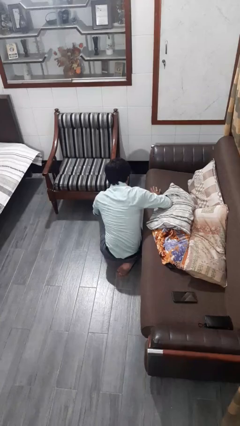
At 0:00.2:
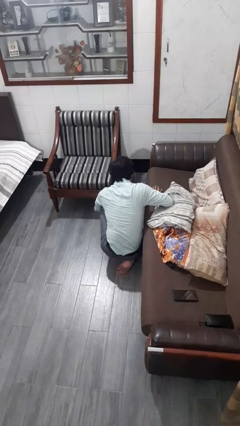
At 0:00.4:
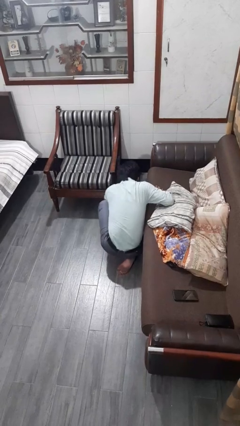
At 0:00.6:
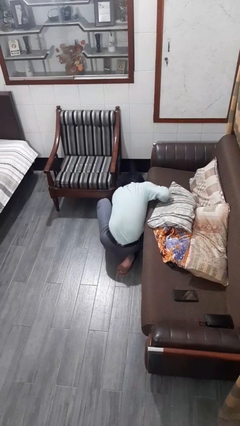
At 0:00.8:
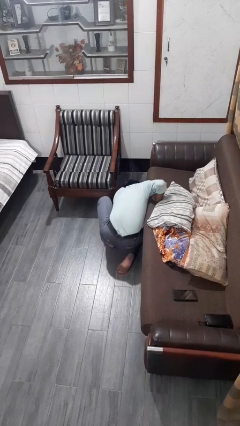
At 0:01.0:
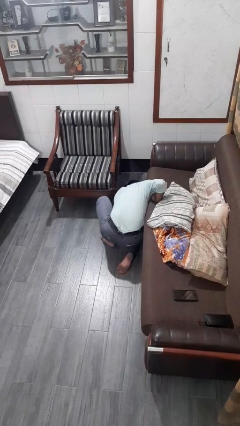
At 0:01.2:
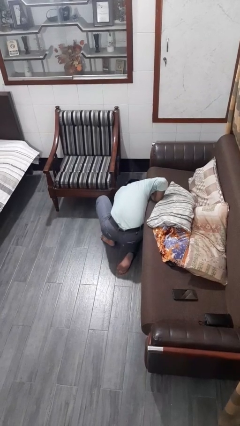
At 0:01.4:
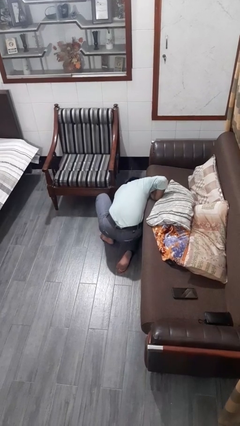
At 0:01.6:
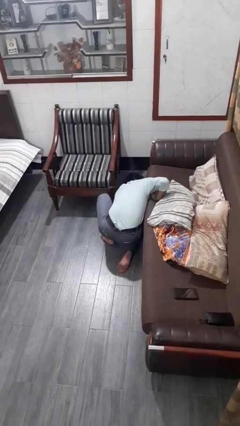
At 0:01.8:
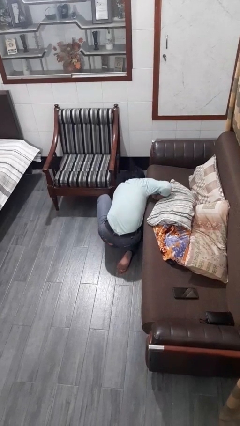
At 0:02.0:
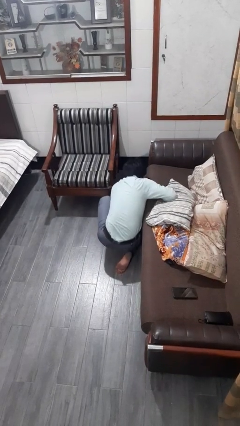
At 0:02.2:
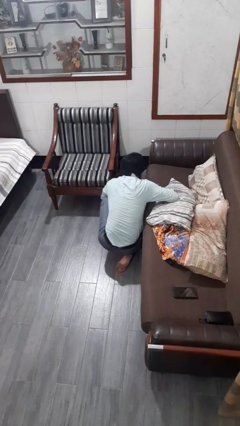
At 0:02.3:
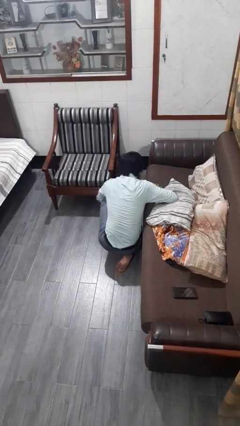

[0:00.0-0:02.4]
person searches under couch

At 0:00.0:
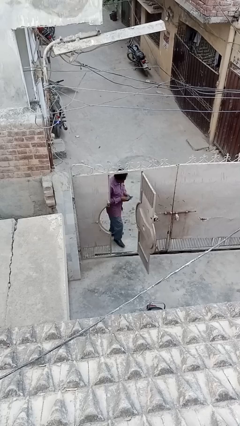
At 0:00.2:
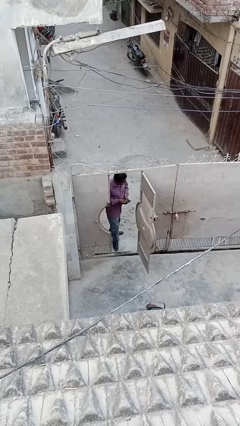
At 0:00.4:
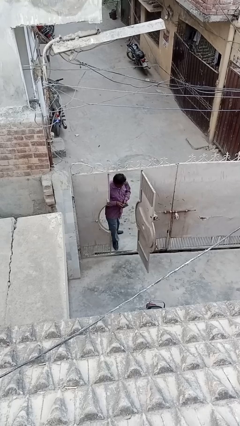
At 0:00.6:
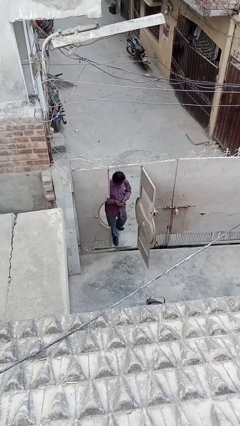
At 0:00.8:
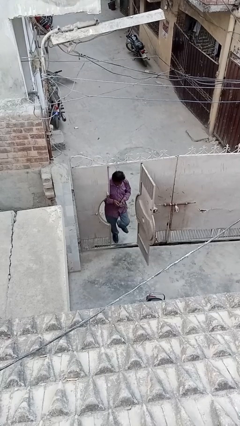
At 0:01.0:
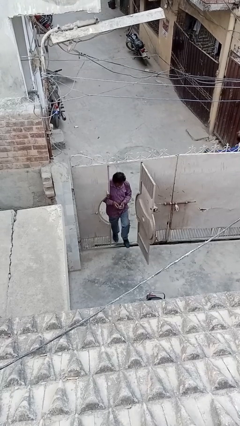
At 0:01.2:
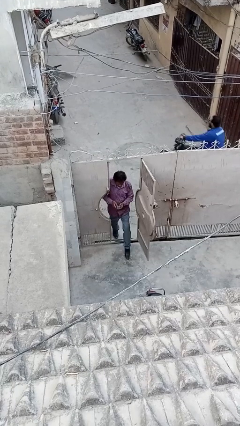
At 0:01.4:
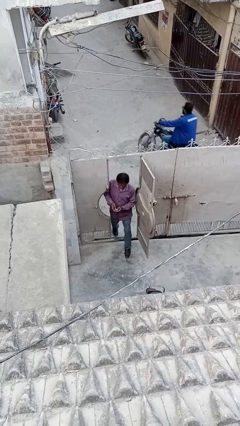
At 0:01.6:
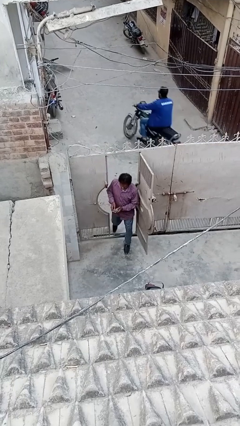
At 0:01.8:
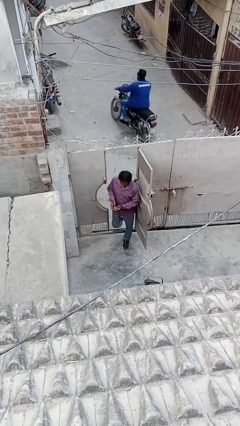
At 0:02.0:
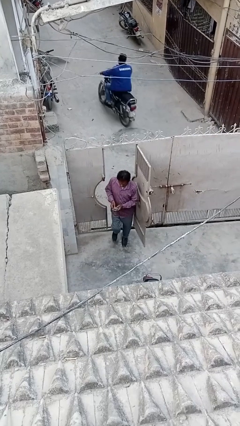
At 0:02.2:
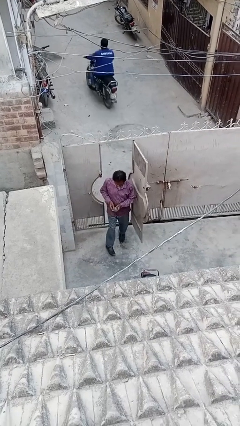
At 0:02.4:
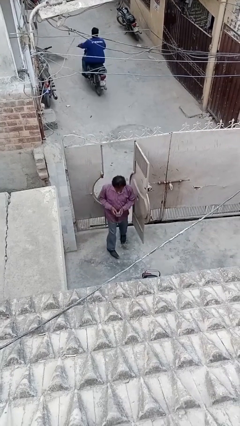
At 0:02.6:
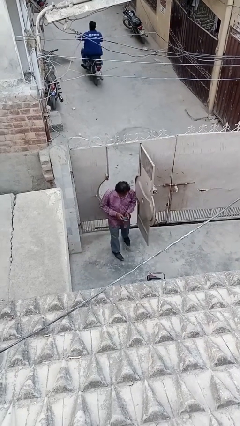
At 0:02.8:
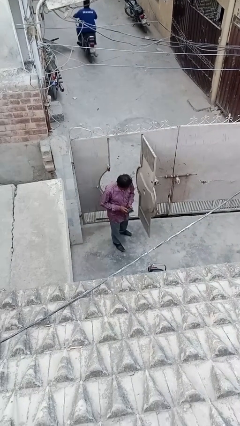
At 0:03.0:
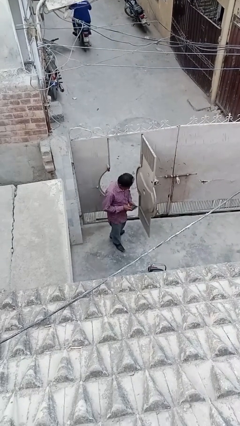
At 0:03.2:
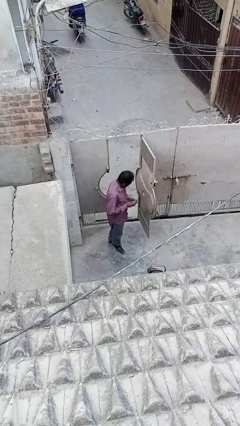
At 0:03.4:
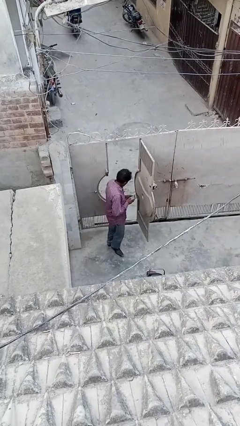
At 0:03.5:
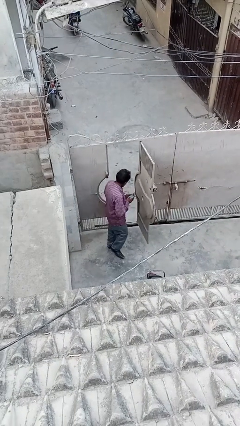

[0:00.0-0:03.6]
person enters scene through structure

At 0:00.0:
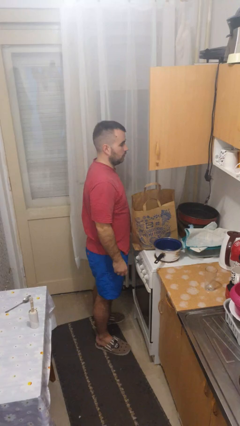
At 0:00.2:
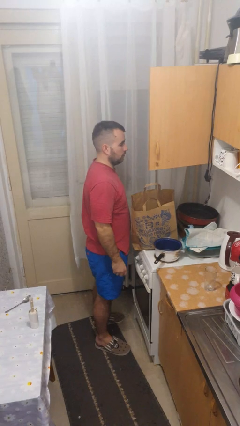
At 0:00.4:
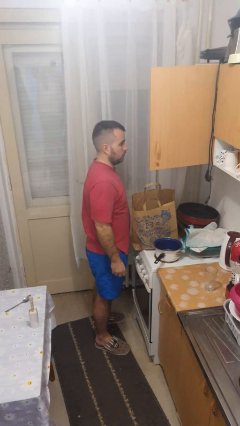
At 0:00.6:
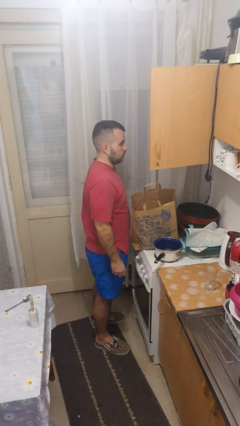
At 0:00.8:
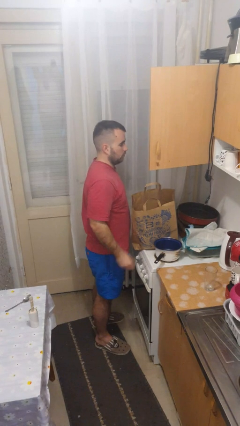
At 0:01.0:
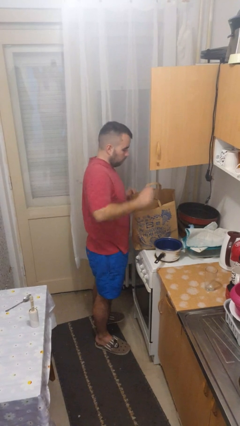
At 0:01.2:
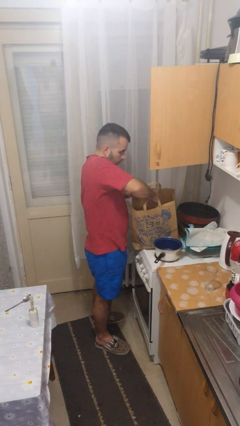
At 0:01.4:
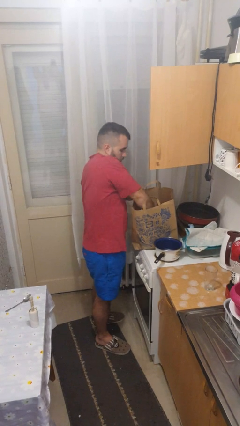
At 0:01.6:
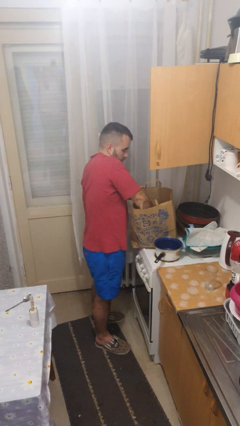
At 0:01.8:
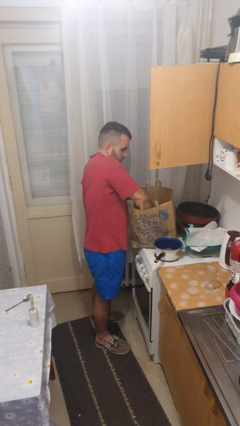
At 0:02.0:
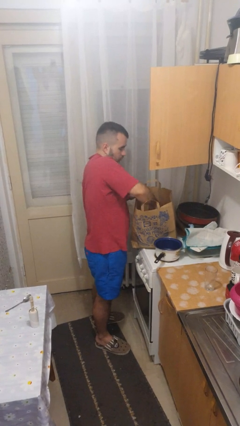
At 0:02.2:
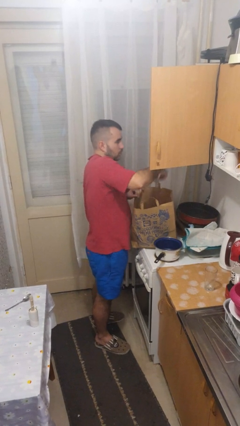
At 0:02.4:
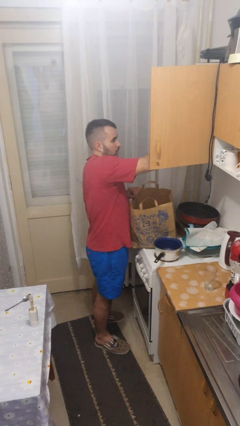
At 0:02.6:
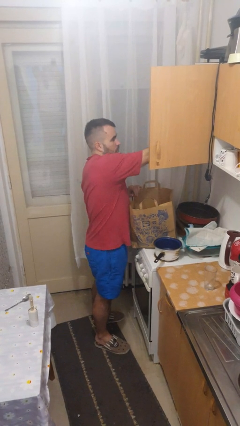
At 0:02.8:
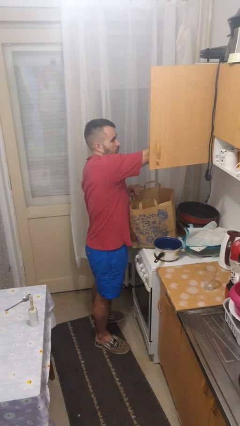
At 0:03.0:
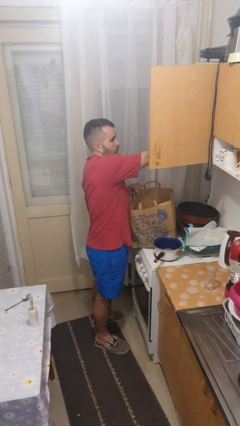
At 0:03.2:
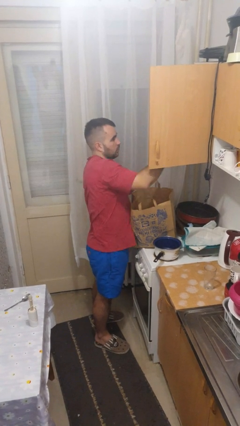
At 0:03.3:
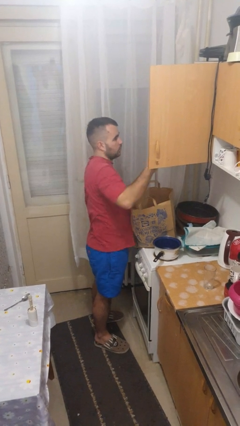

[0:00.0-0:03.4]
person loads groceries into cabinet

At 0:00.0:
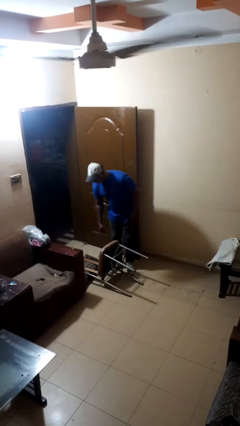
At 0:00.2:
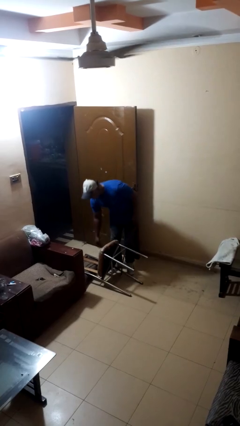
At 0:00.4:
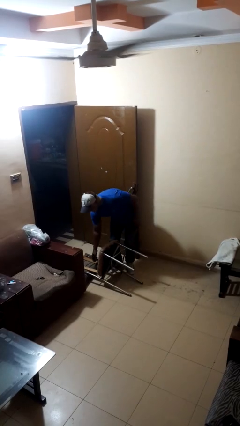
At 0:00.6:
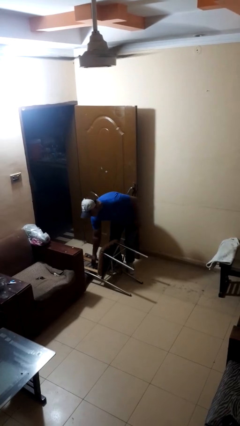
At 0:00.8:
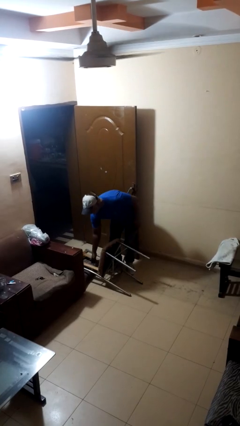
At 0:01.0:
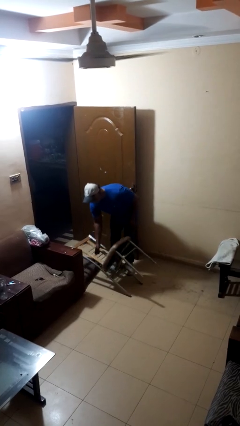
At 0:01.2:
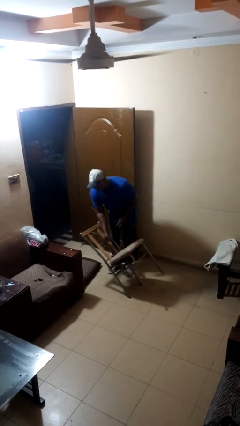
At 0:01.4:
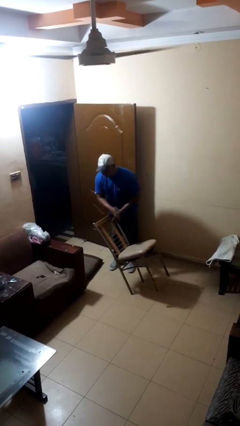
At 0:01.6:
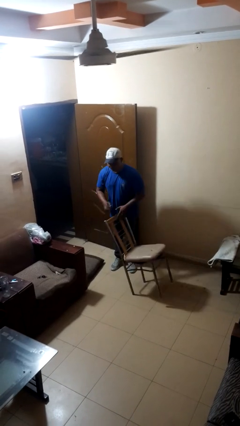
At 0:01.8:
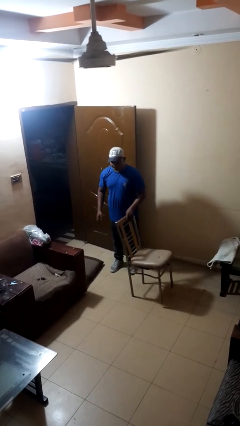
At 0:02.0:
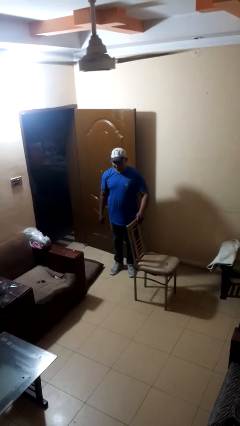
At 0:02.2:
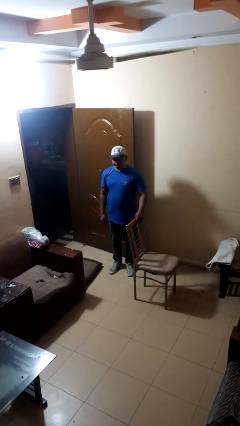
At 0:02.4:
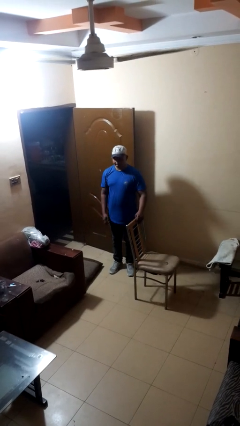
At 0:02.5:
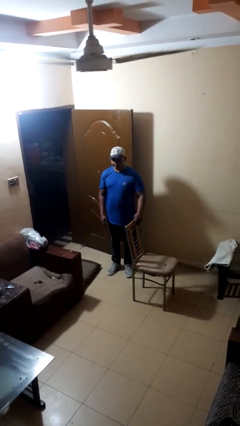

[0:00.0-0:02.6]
person sets upright furniture

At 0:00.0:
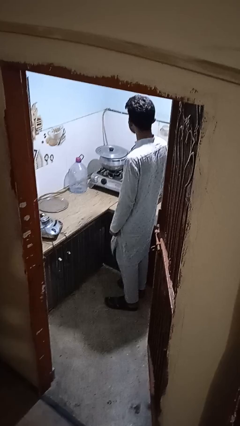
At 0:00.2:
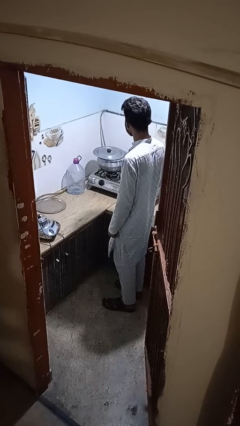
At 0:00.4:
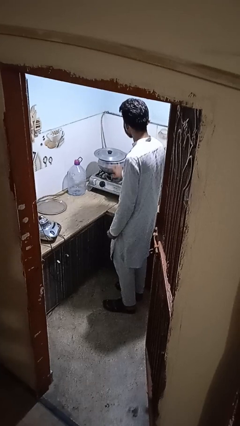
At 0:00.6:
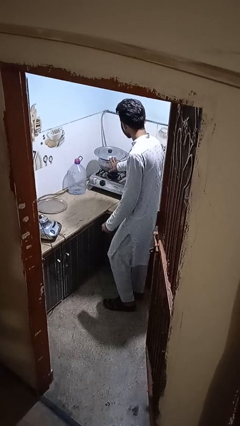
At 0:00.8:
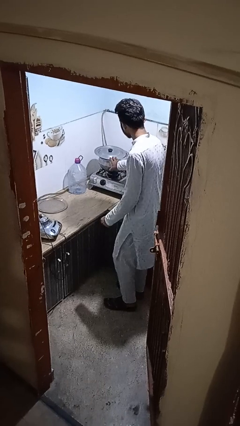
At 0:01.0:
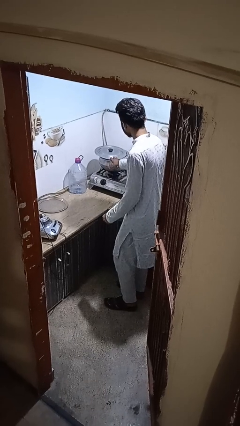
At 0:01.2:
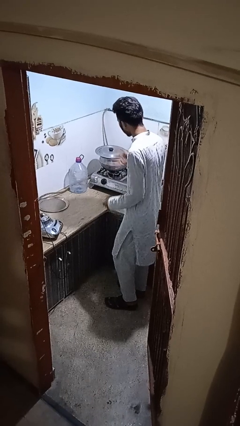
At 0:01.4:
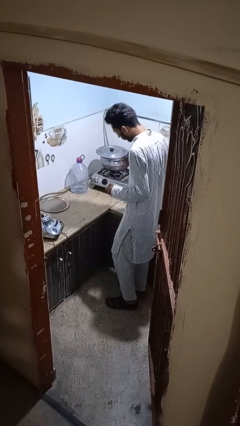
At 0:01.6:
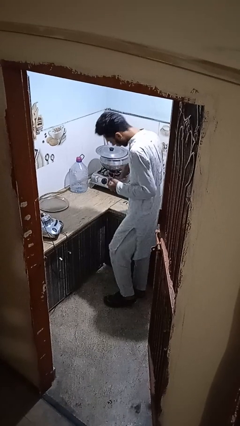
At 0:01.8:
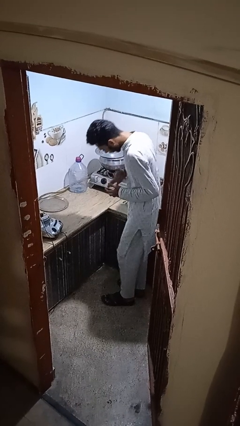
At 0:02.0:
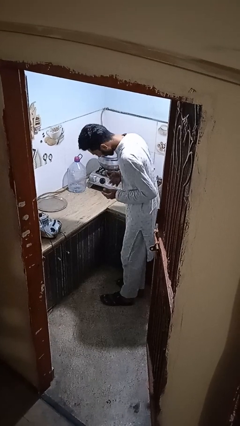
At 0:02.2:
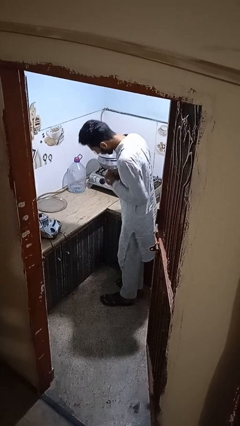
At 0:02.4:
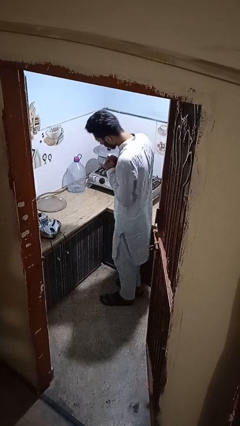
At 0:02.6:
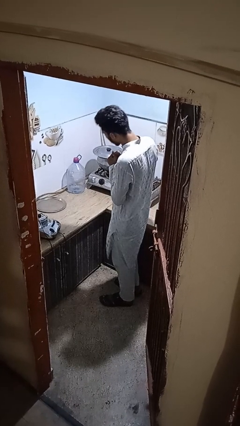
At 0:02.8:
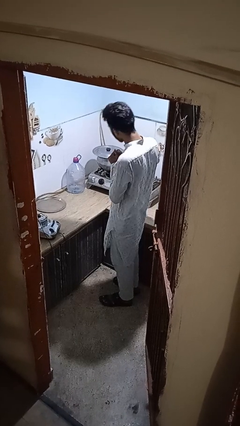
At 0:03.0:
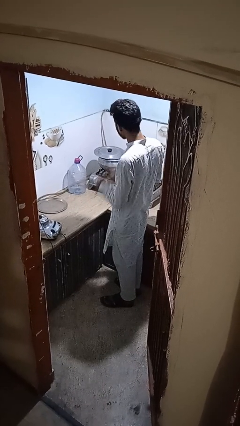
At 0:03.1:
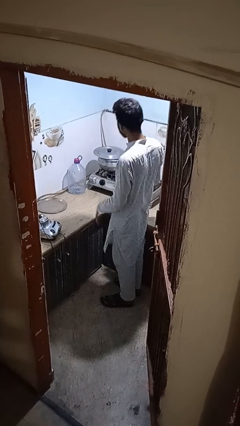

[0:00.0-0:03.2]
person burns hand

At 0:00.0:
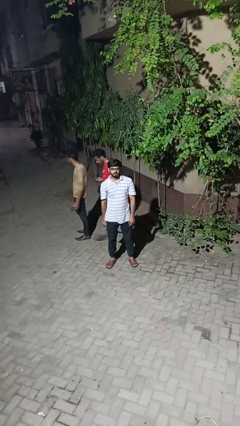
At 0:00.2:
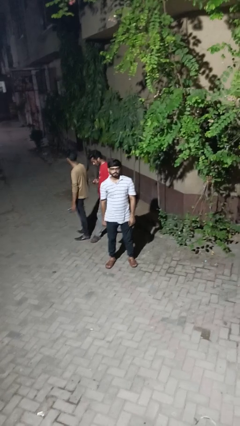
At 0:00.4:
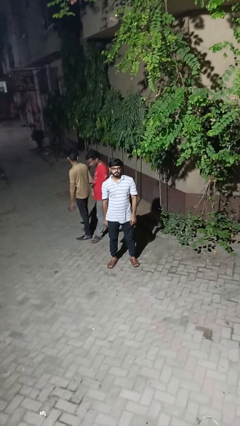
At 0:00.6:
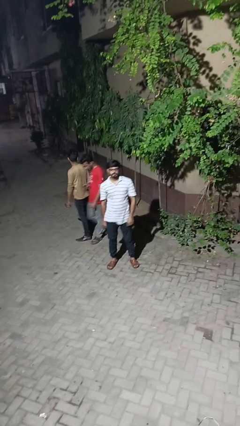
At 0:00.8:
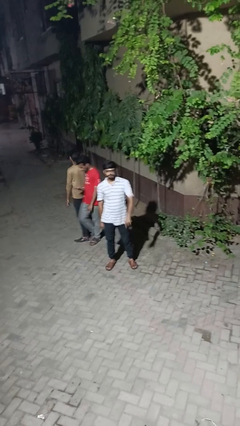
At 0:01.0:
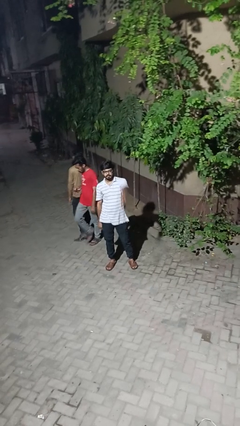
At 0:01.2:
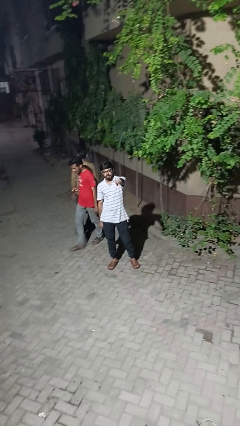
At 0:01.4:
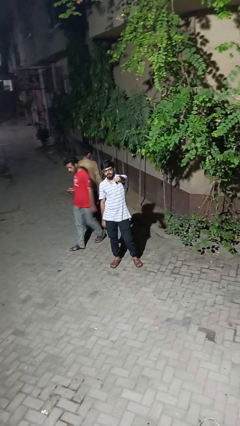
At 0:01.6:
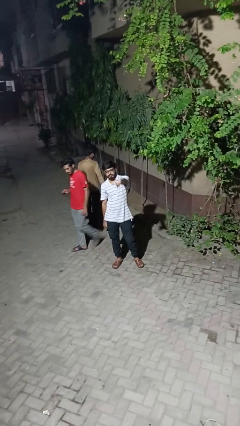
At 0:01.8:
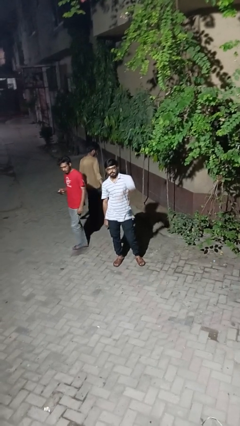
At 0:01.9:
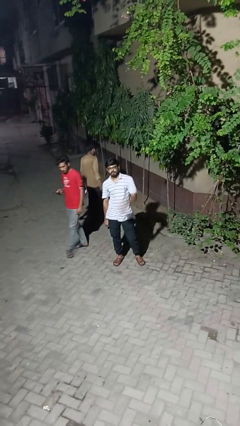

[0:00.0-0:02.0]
person points at person
